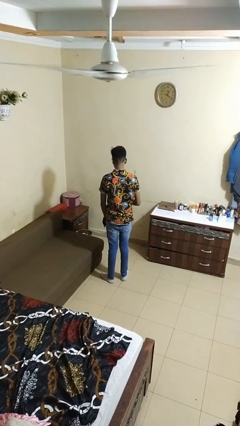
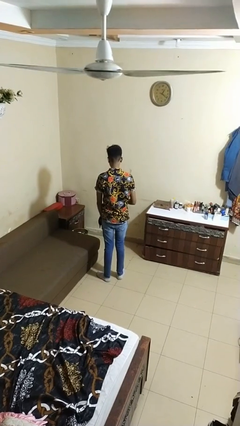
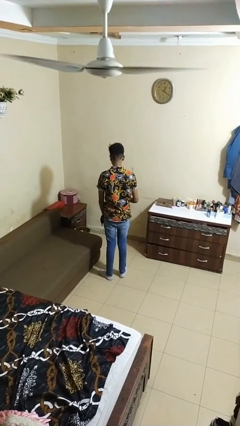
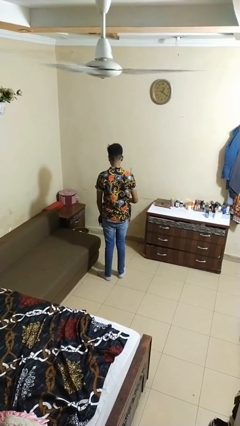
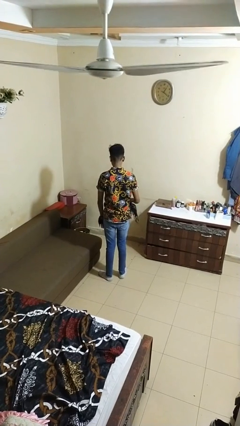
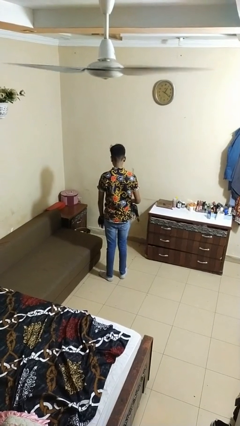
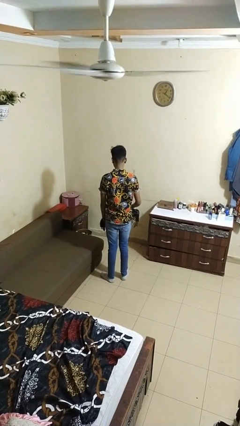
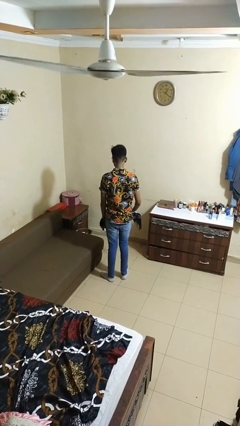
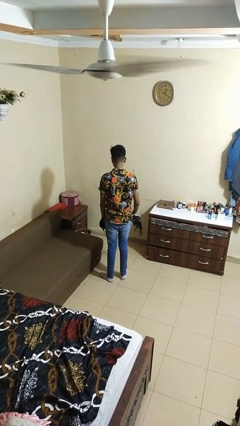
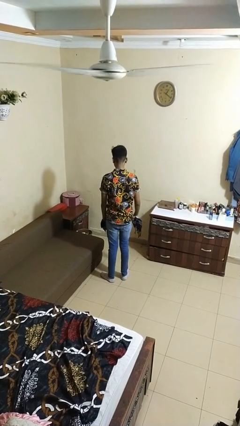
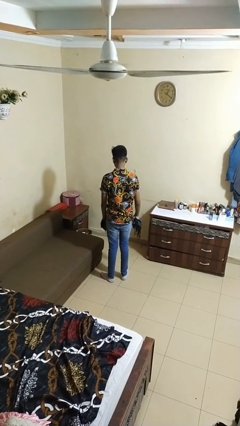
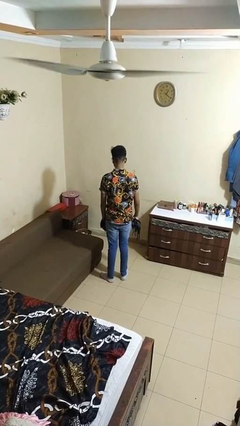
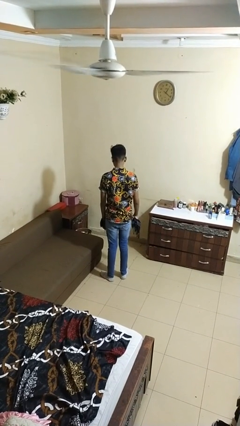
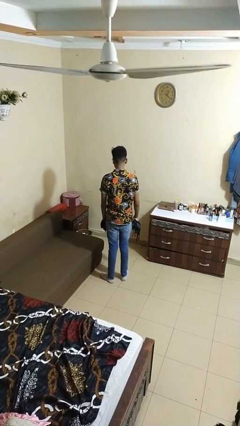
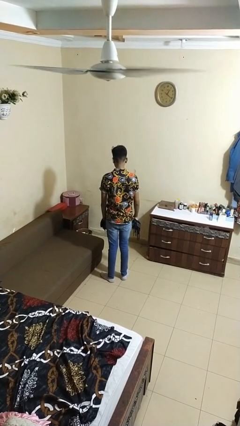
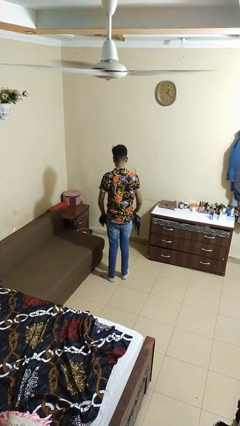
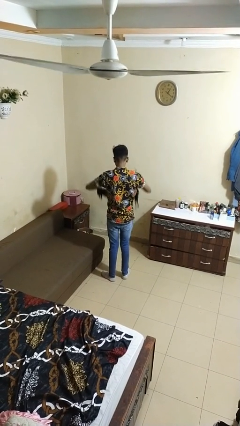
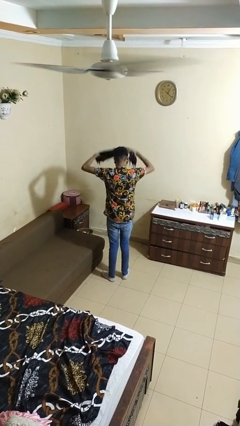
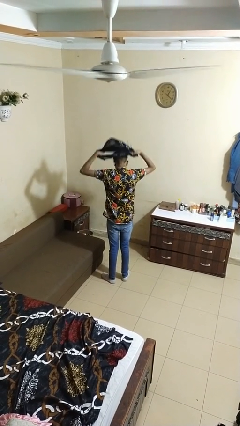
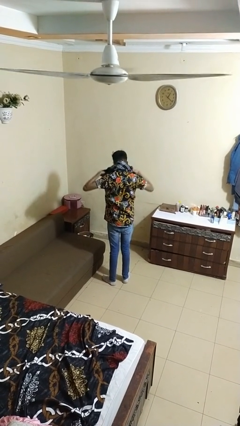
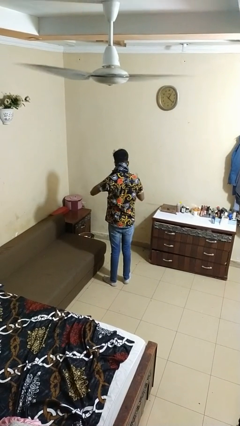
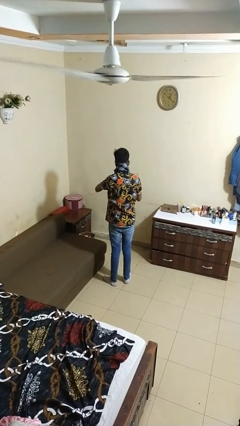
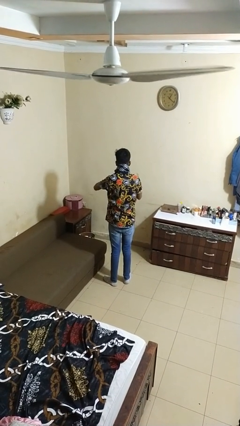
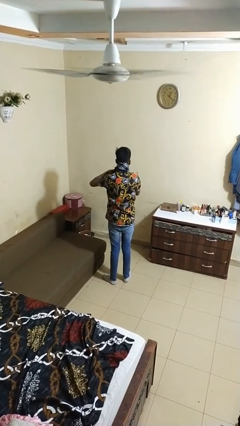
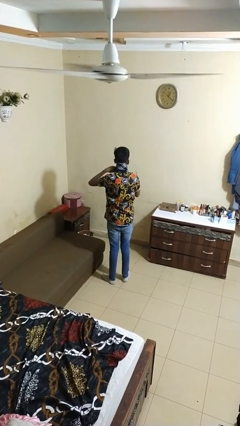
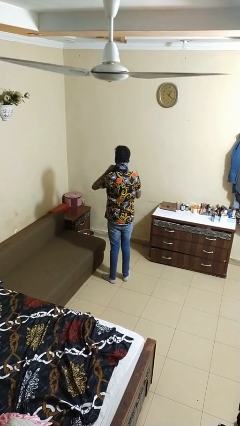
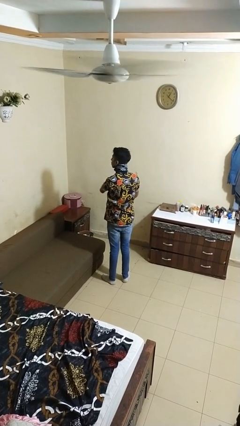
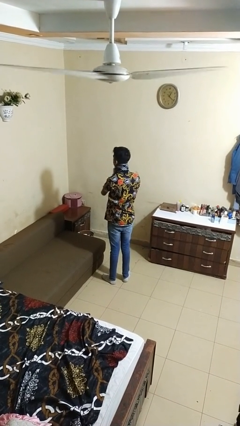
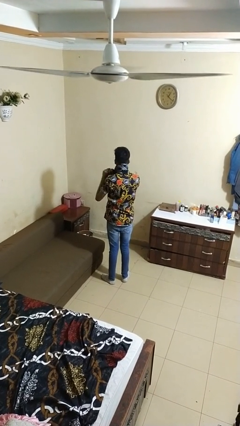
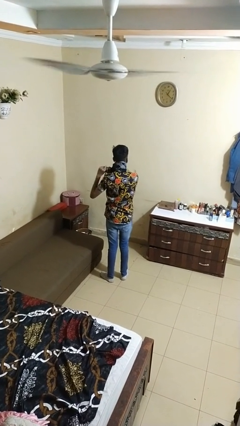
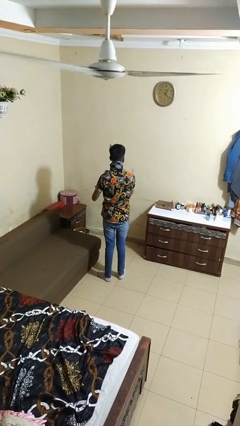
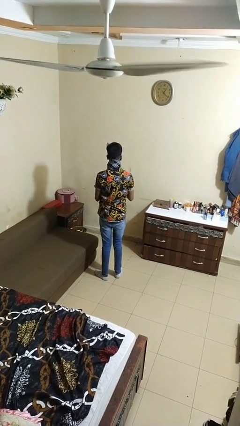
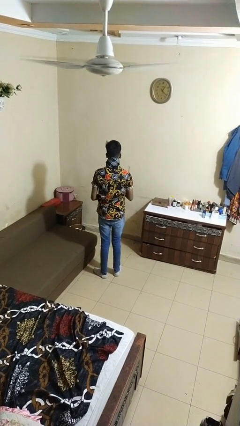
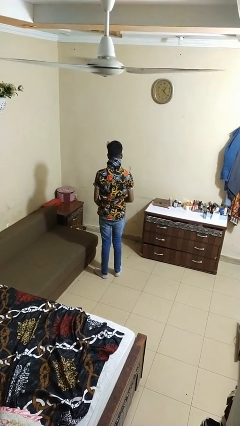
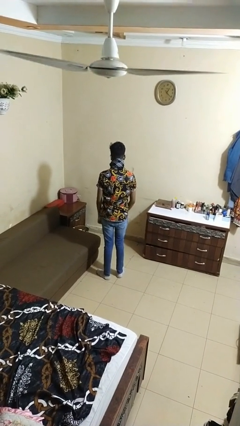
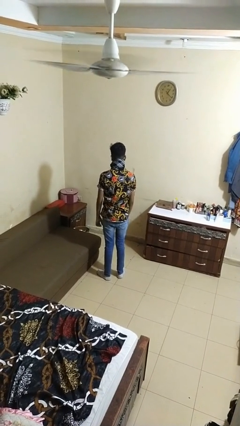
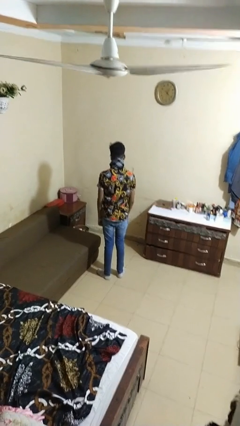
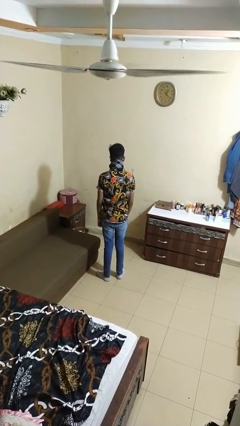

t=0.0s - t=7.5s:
person puts on scarf

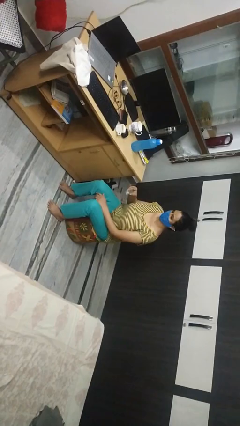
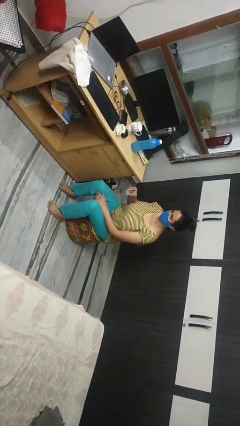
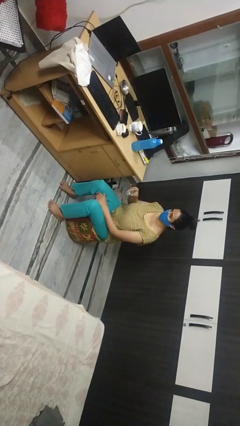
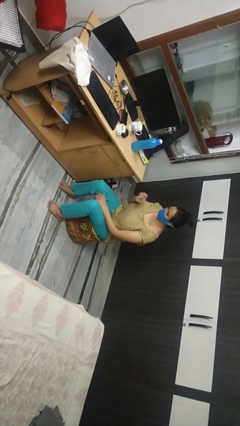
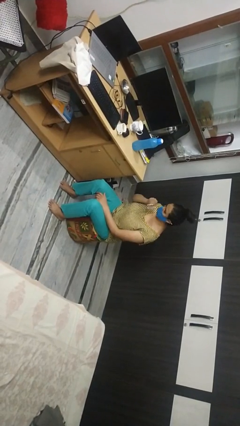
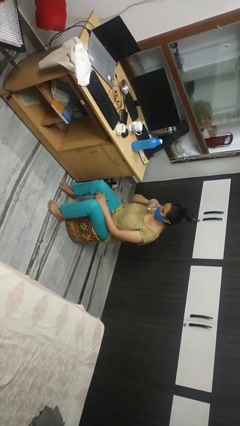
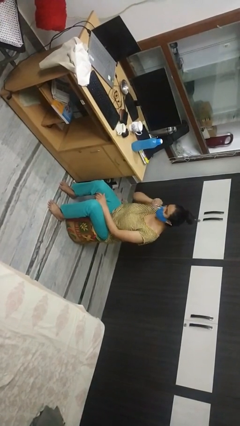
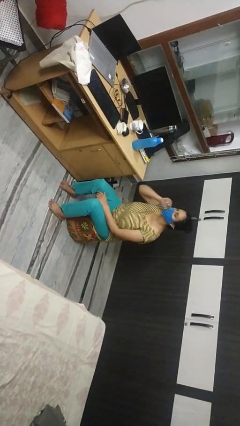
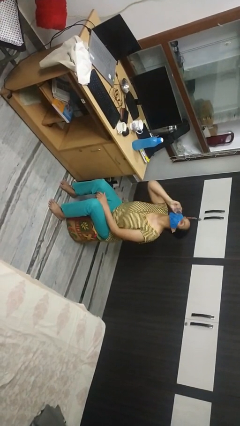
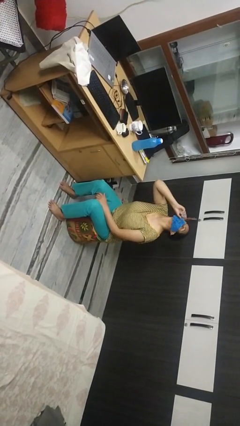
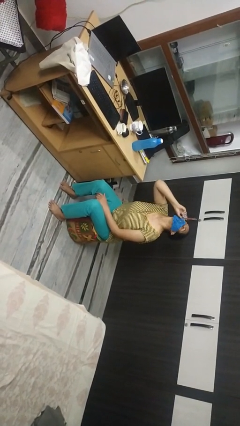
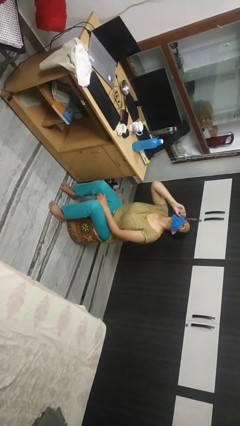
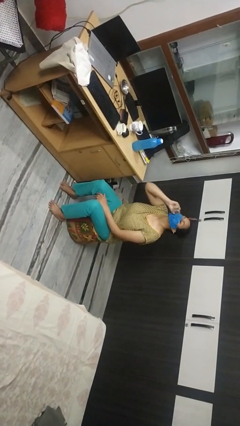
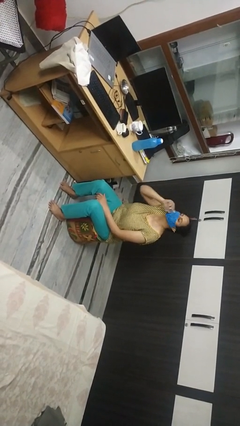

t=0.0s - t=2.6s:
person drinks from shotglass

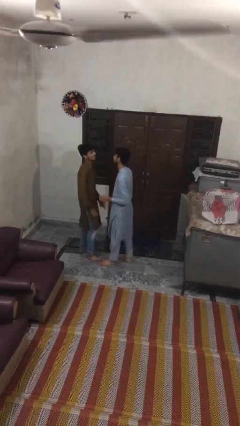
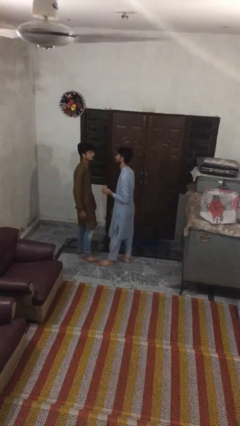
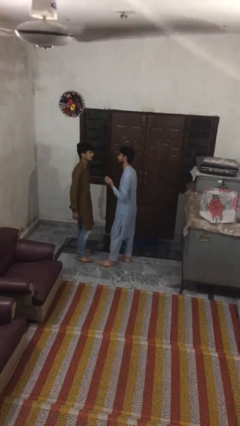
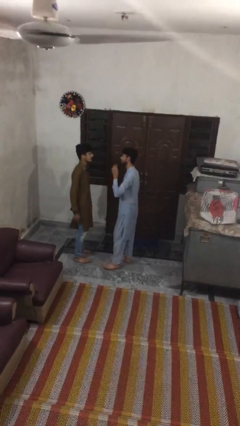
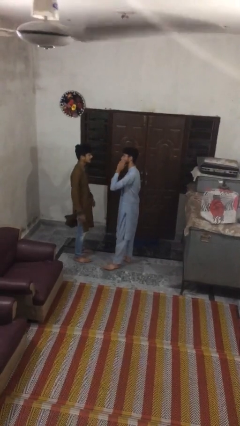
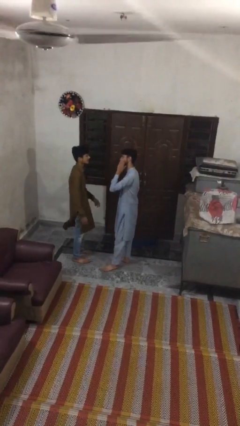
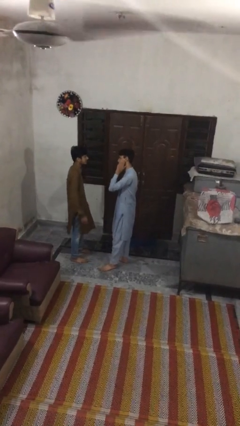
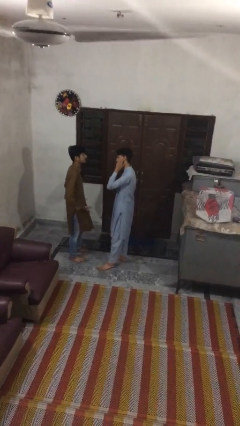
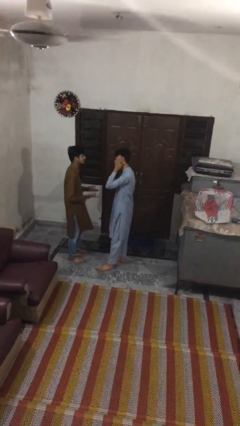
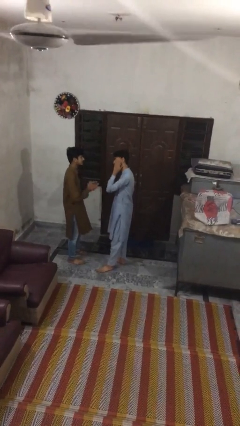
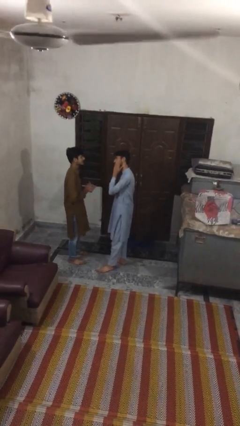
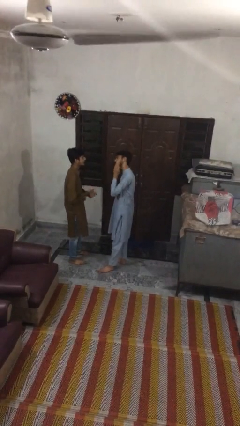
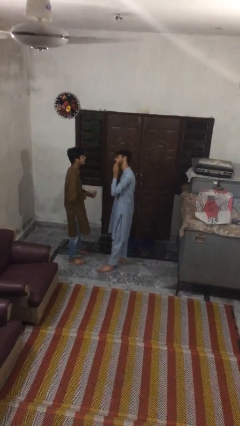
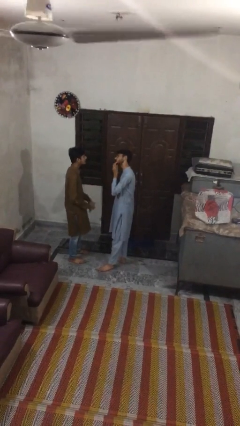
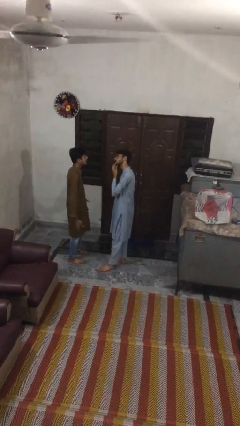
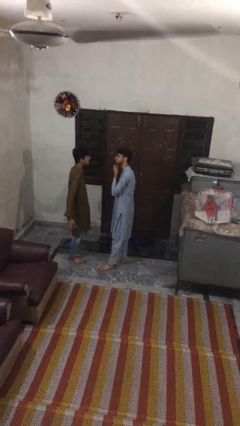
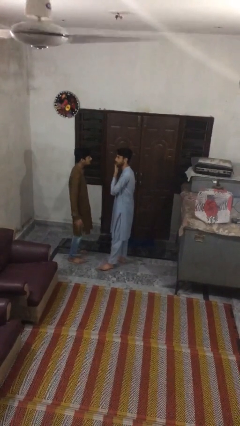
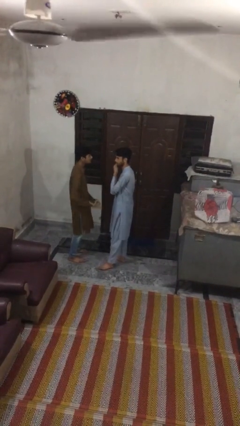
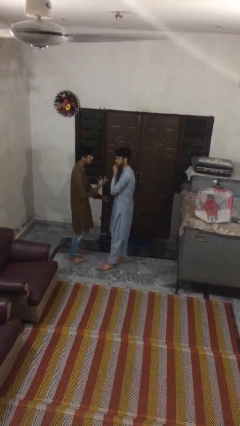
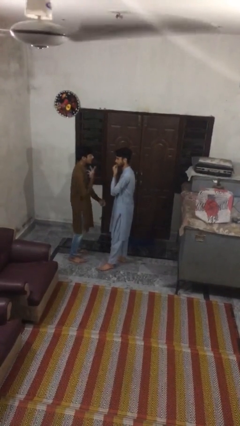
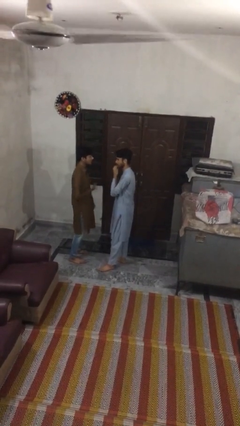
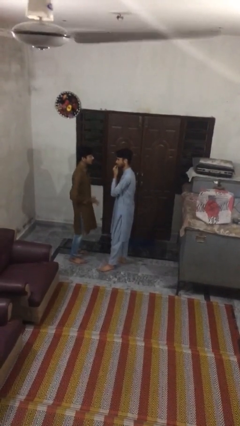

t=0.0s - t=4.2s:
person talks to person

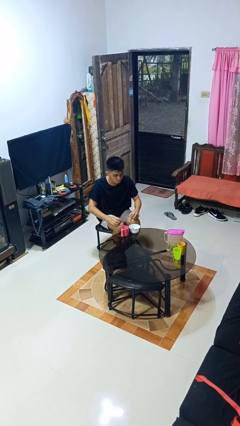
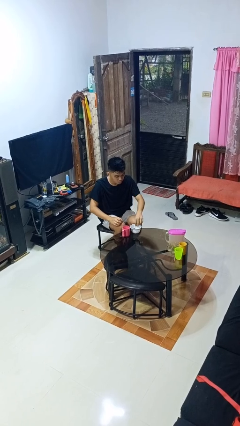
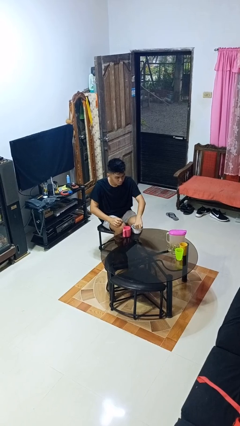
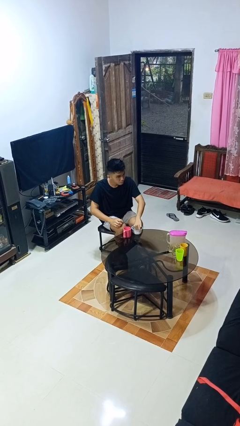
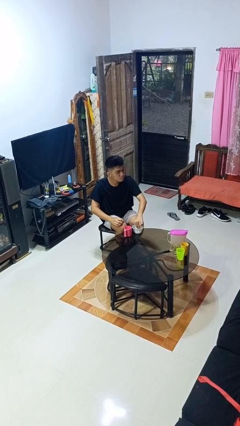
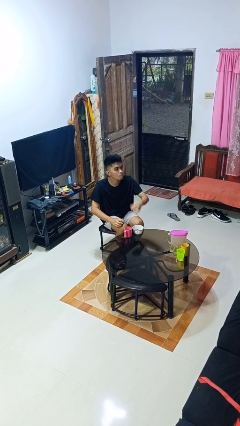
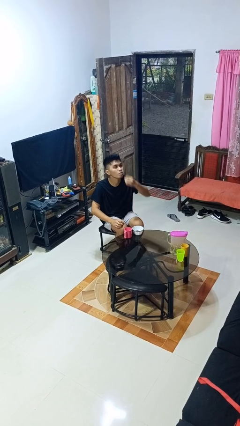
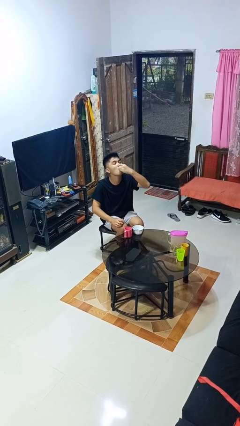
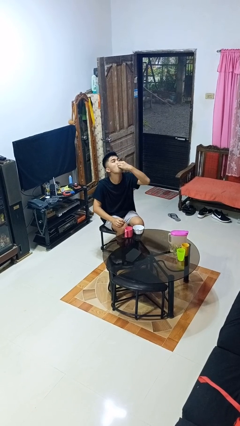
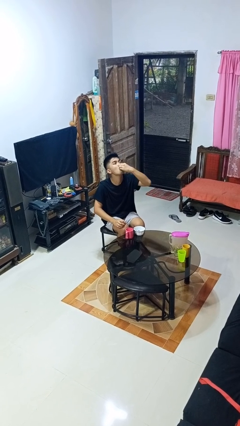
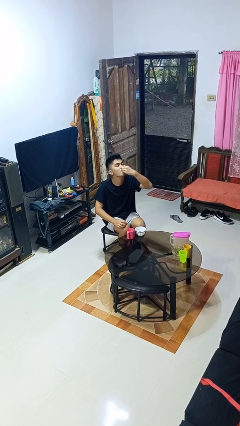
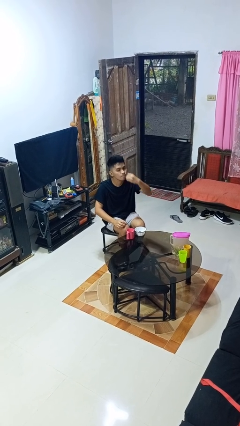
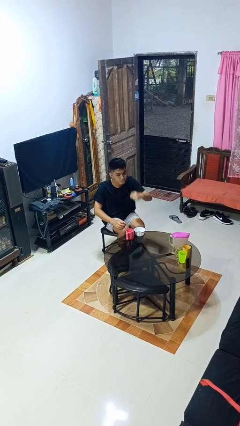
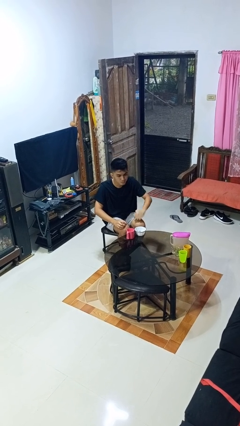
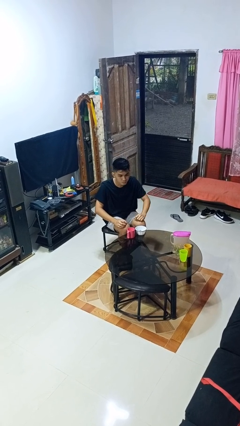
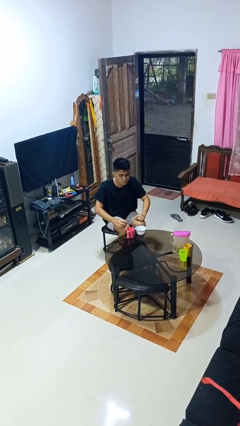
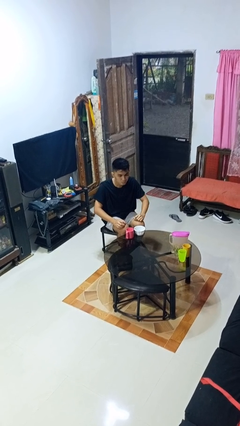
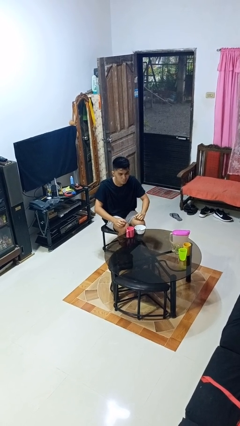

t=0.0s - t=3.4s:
person takes medicine pills

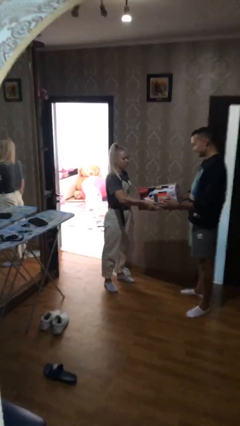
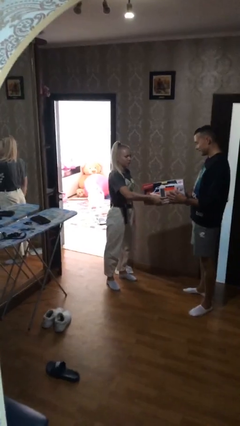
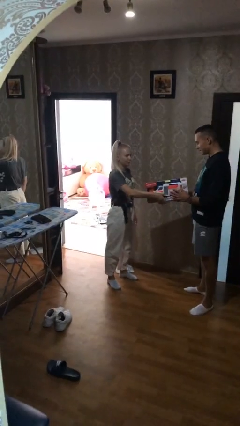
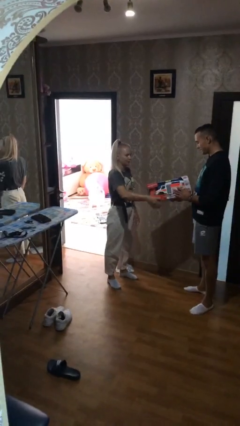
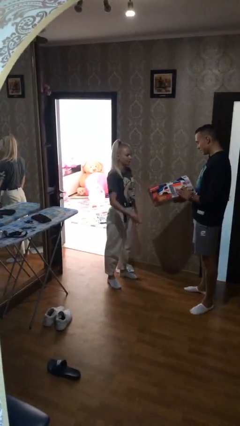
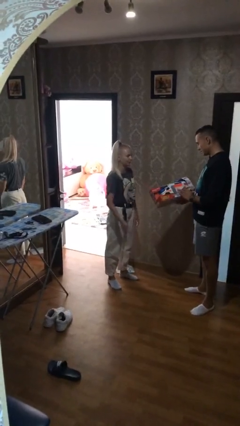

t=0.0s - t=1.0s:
person transfers object to person
